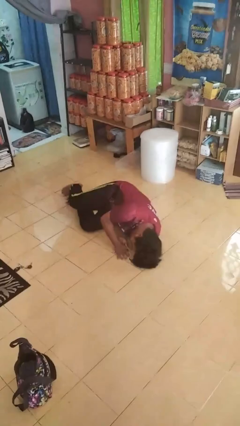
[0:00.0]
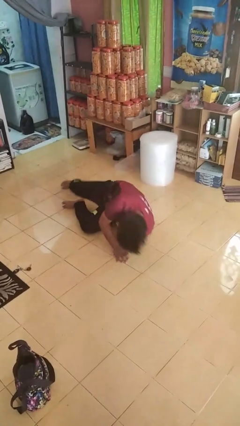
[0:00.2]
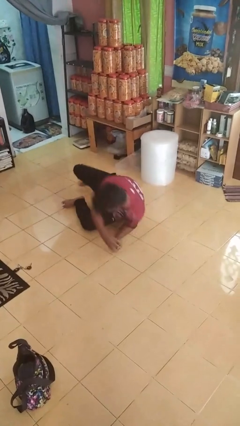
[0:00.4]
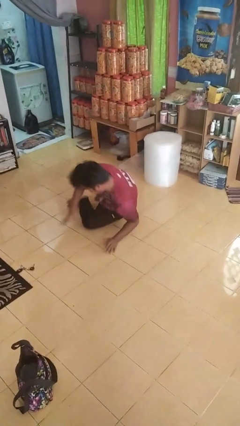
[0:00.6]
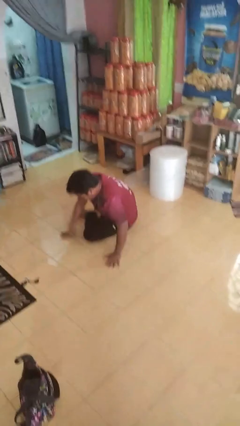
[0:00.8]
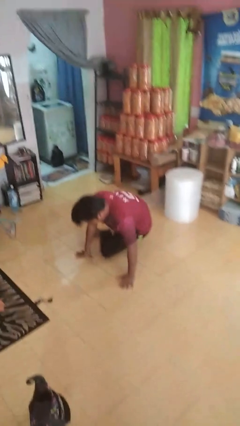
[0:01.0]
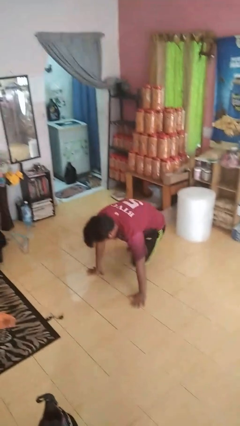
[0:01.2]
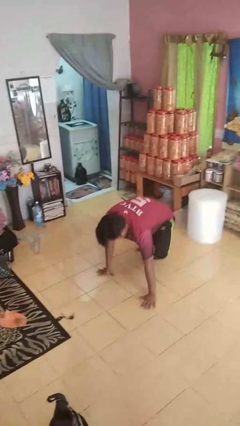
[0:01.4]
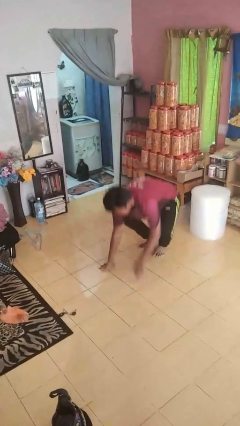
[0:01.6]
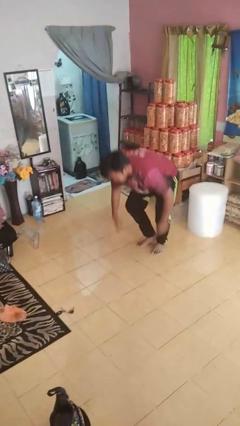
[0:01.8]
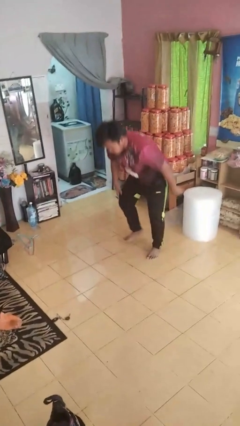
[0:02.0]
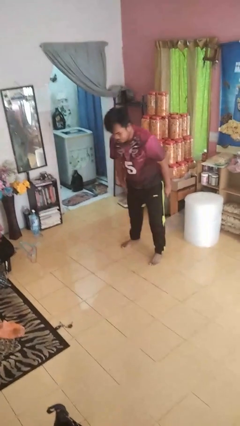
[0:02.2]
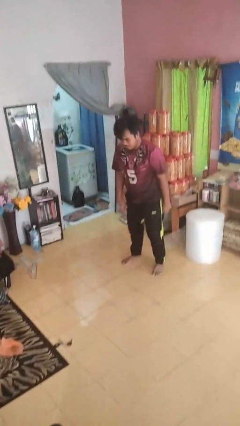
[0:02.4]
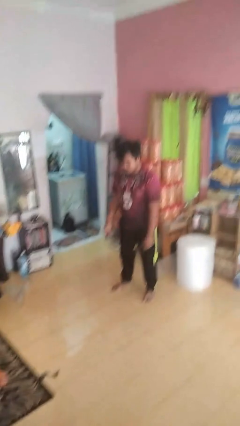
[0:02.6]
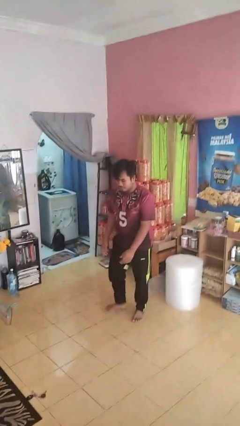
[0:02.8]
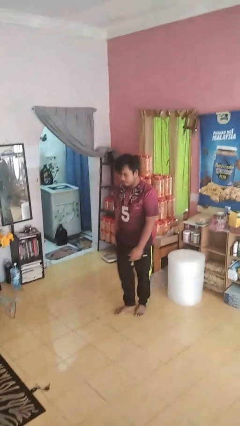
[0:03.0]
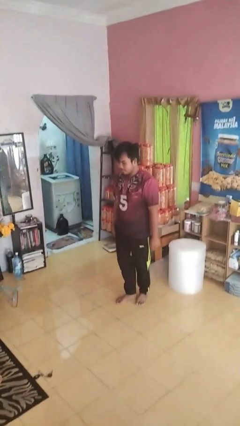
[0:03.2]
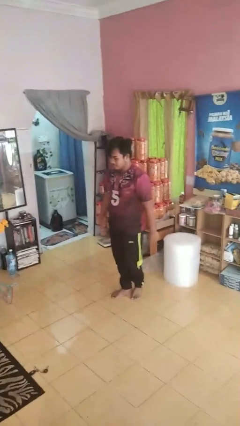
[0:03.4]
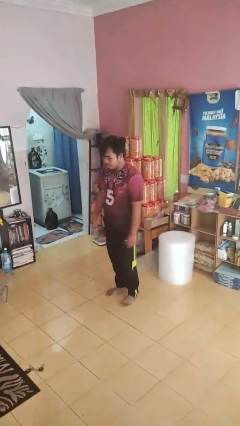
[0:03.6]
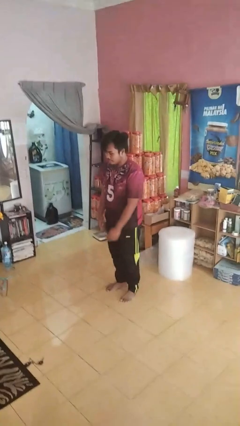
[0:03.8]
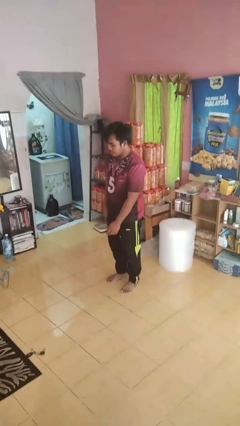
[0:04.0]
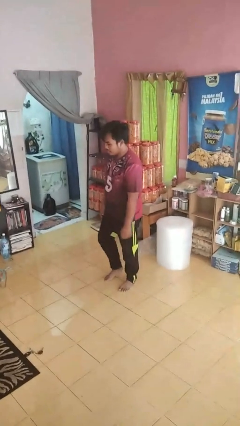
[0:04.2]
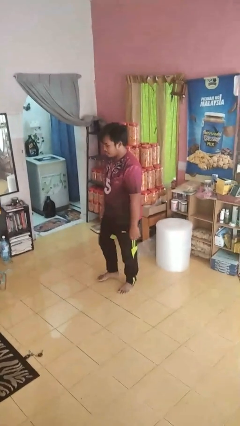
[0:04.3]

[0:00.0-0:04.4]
person stands up from floor

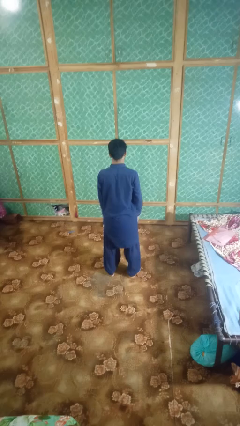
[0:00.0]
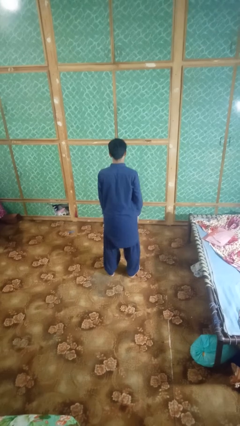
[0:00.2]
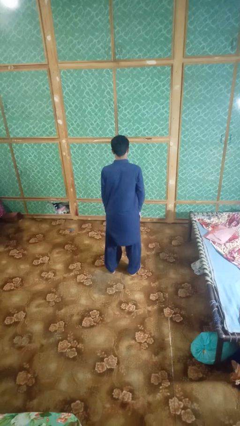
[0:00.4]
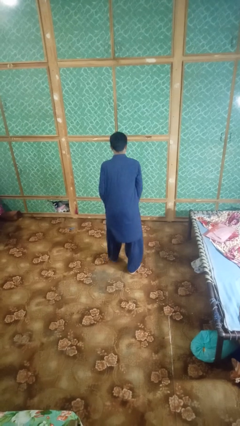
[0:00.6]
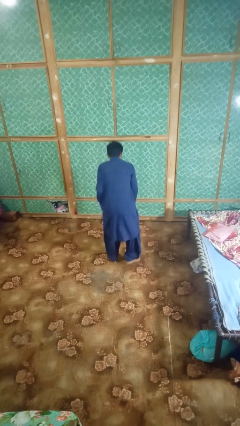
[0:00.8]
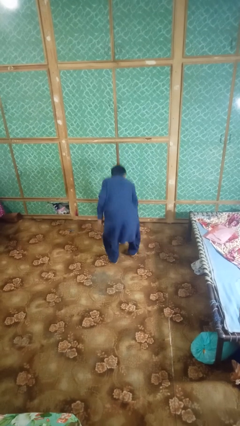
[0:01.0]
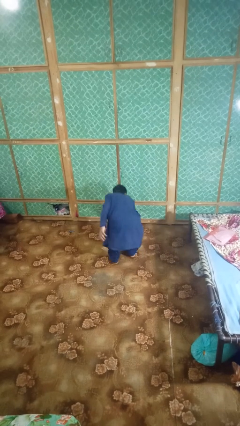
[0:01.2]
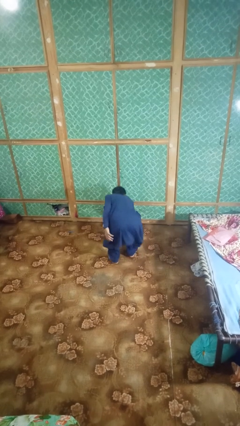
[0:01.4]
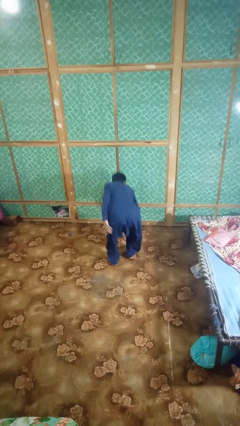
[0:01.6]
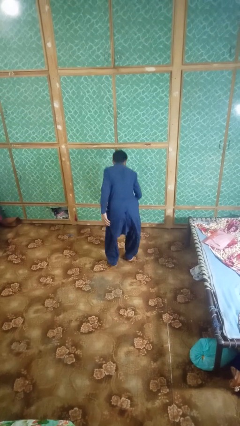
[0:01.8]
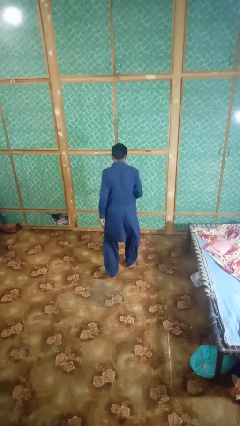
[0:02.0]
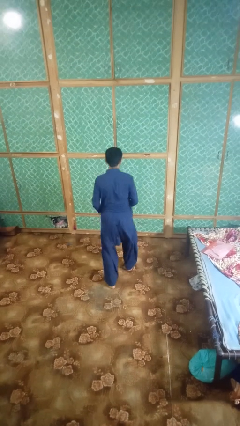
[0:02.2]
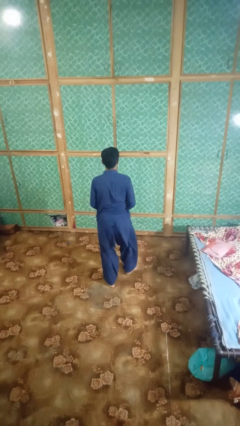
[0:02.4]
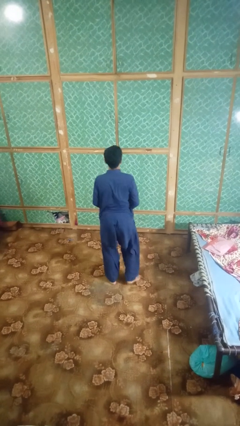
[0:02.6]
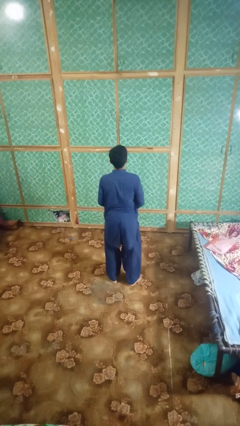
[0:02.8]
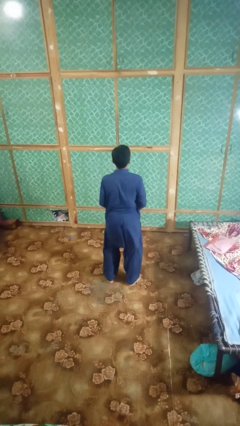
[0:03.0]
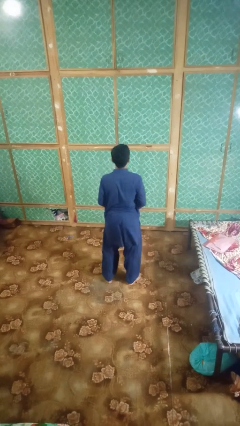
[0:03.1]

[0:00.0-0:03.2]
person picks up object from floor

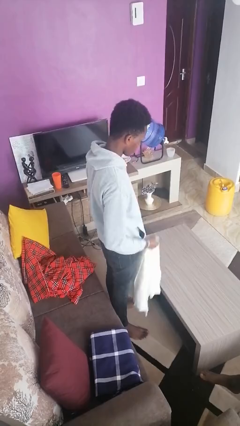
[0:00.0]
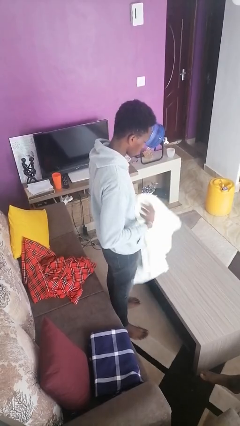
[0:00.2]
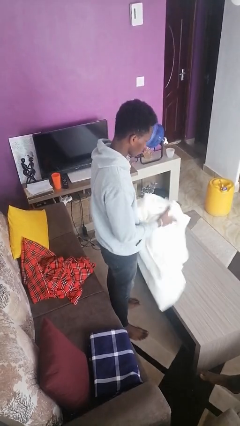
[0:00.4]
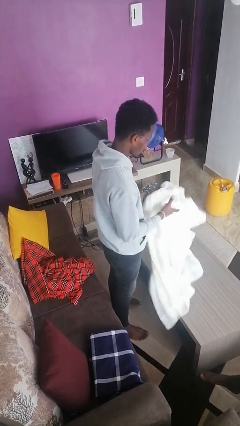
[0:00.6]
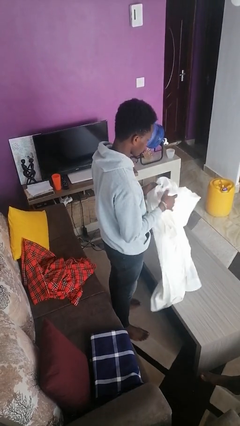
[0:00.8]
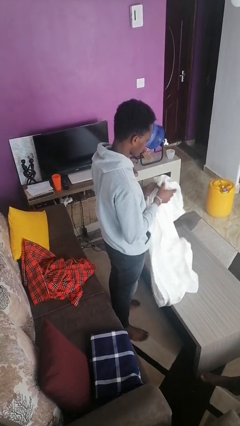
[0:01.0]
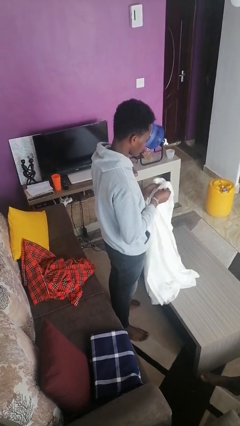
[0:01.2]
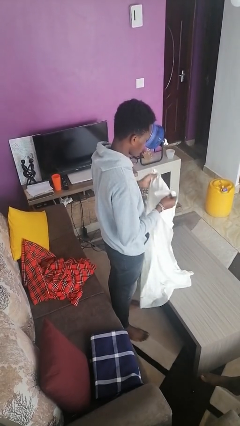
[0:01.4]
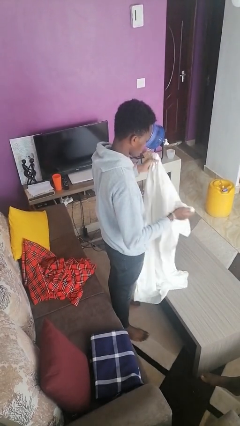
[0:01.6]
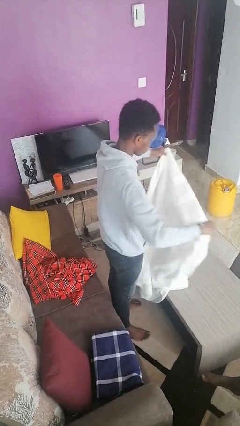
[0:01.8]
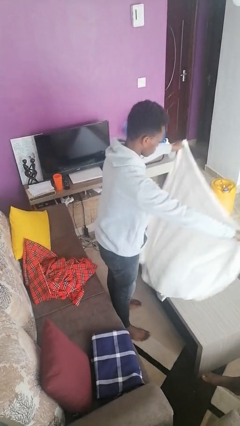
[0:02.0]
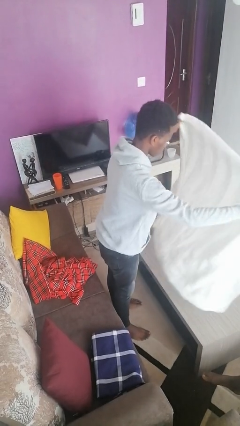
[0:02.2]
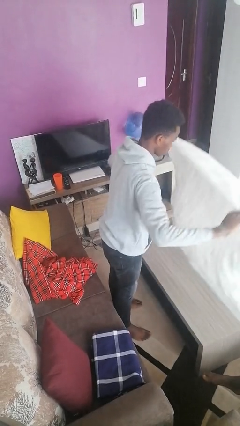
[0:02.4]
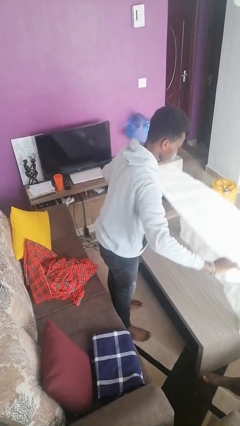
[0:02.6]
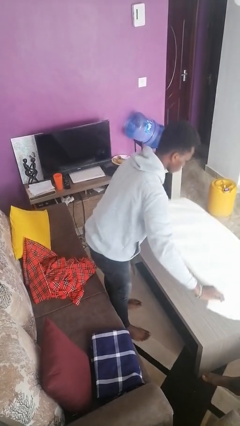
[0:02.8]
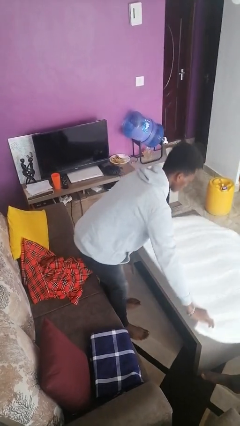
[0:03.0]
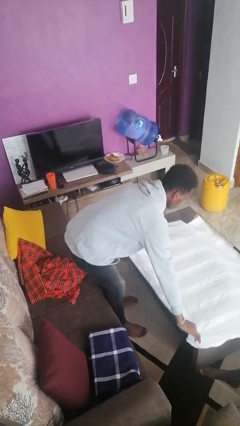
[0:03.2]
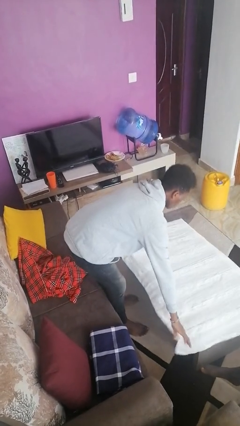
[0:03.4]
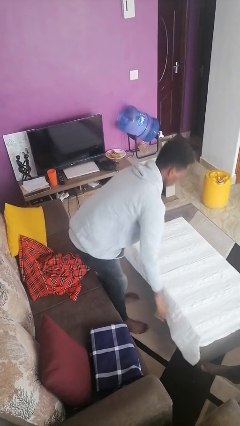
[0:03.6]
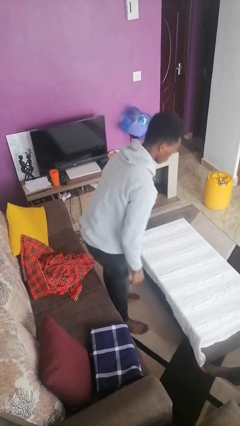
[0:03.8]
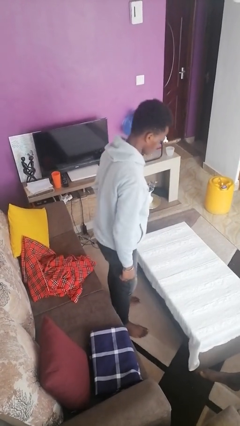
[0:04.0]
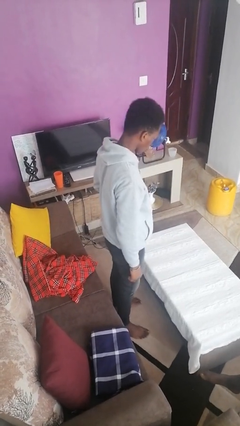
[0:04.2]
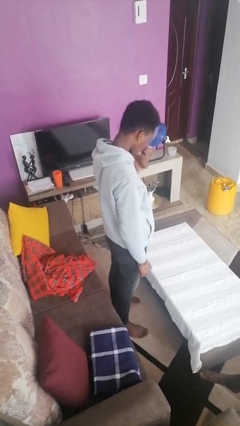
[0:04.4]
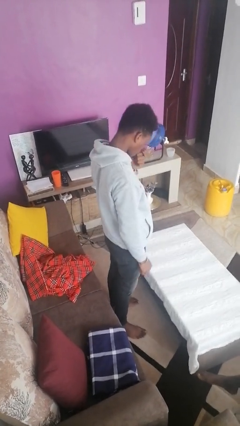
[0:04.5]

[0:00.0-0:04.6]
person spreads tablecloth

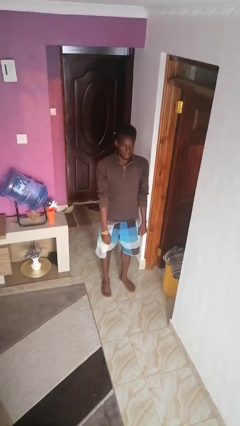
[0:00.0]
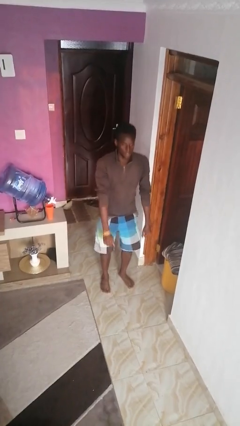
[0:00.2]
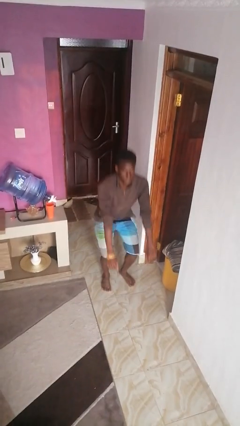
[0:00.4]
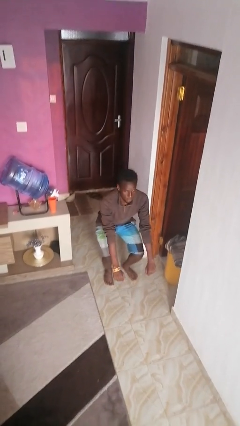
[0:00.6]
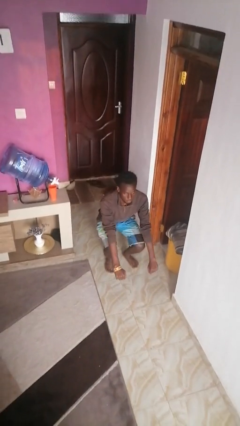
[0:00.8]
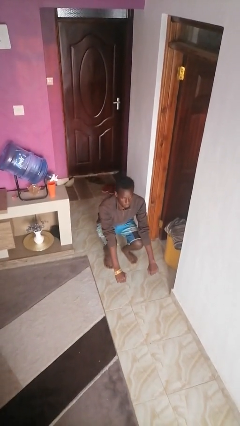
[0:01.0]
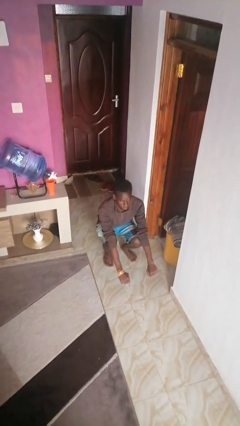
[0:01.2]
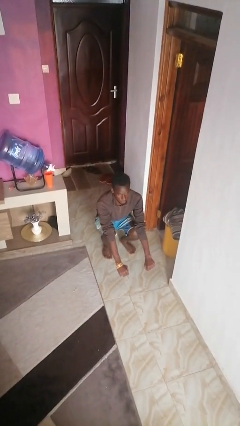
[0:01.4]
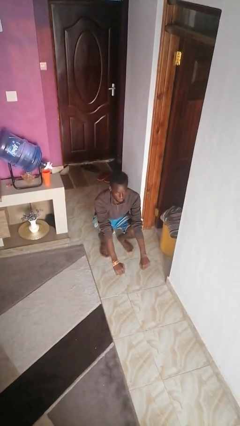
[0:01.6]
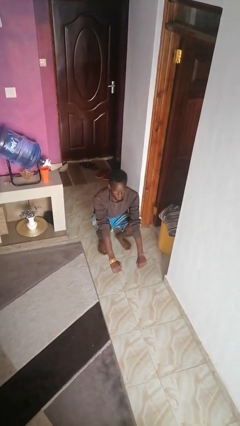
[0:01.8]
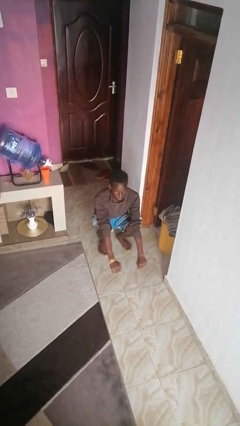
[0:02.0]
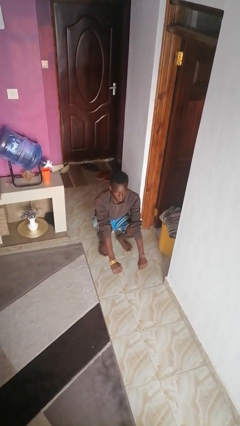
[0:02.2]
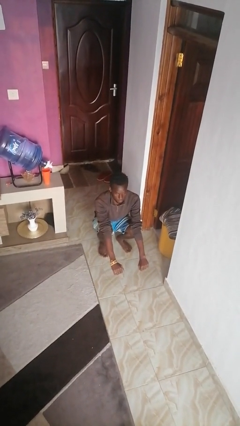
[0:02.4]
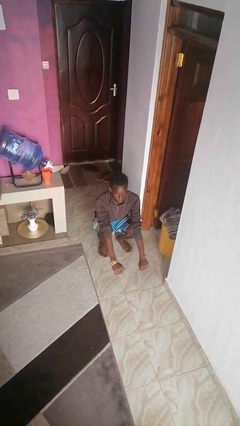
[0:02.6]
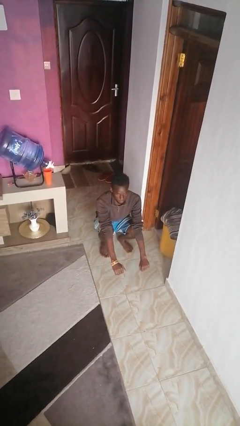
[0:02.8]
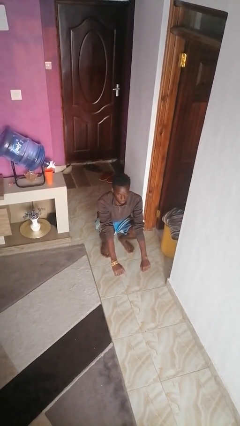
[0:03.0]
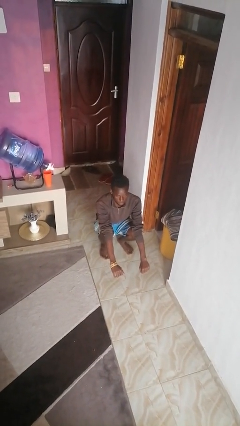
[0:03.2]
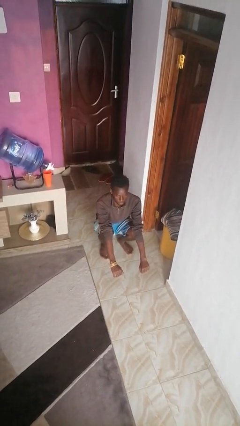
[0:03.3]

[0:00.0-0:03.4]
person squats

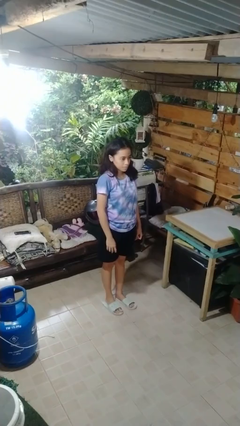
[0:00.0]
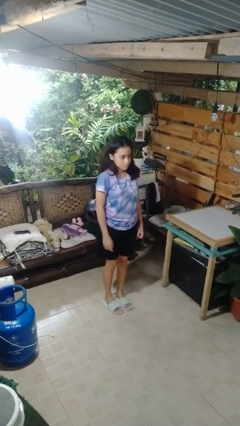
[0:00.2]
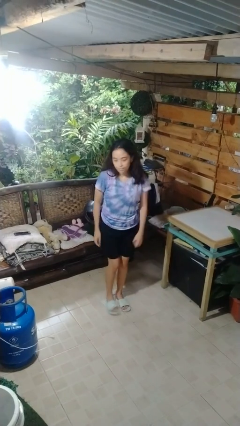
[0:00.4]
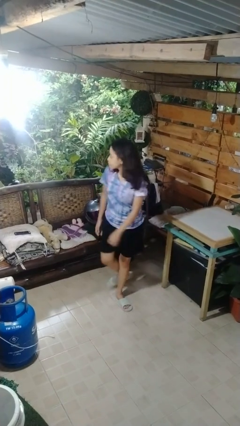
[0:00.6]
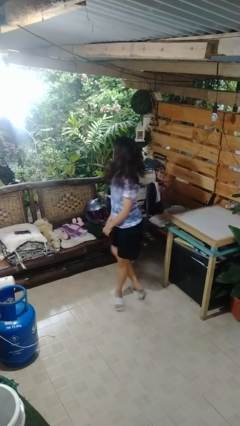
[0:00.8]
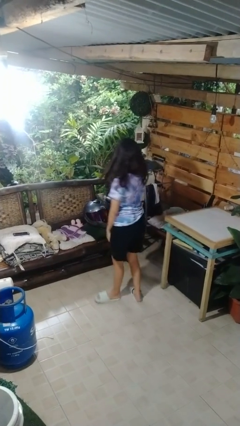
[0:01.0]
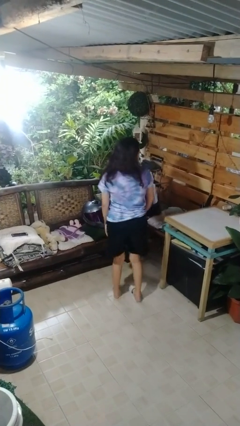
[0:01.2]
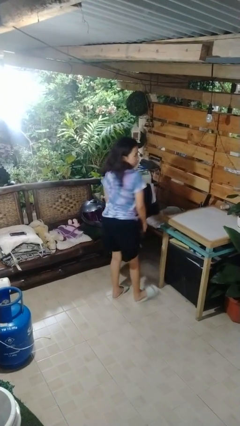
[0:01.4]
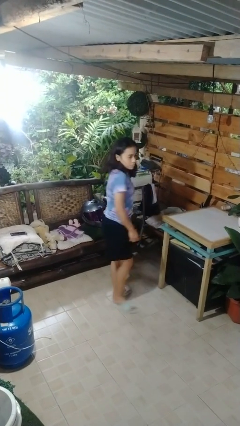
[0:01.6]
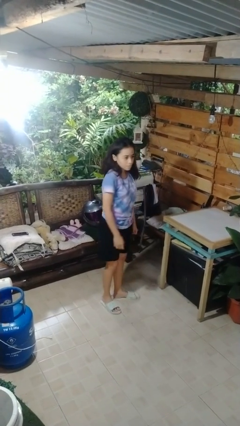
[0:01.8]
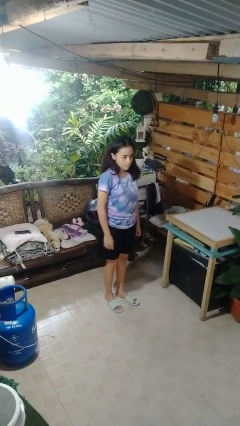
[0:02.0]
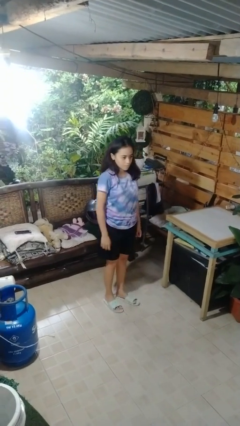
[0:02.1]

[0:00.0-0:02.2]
person twirls
